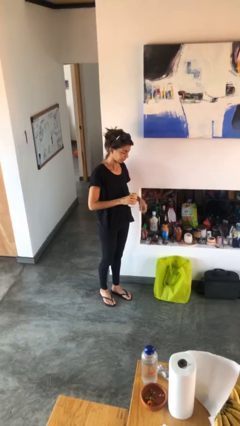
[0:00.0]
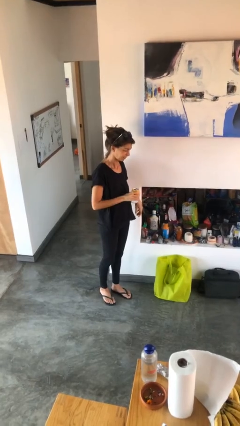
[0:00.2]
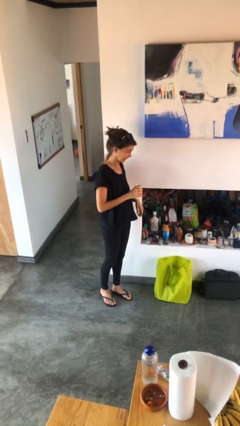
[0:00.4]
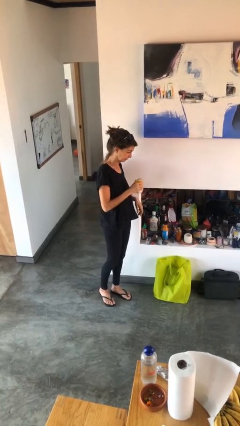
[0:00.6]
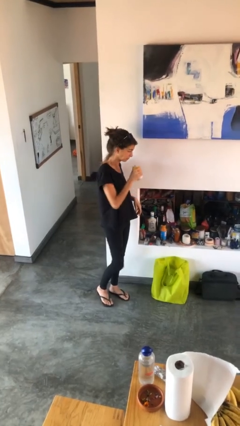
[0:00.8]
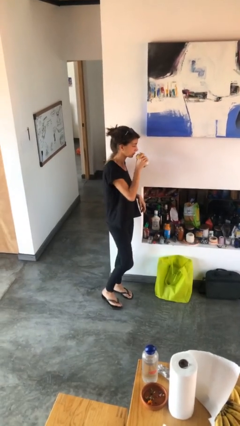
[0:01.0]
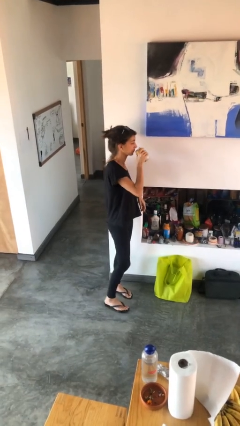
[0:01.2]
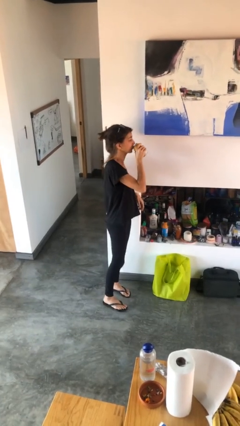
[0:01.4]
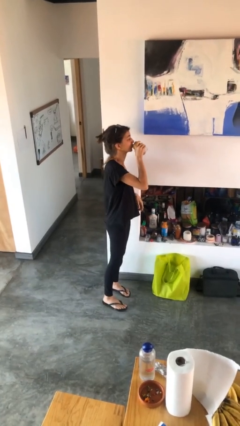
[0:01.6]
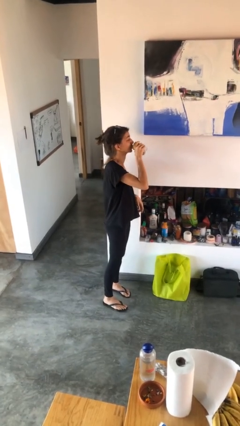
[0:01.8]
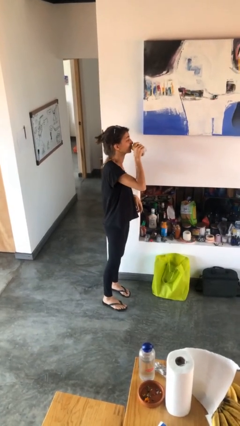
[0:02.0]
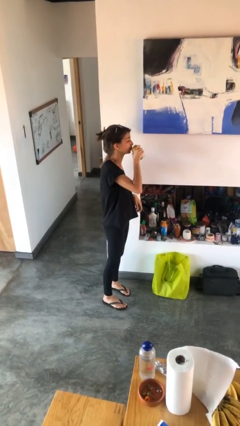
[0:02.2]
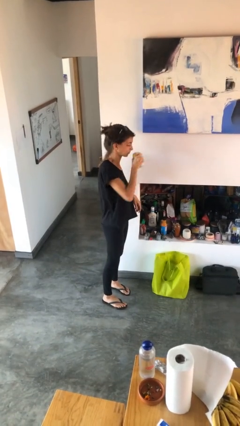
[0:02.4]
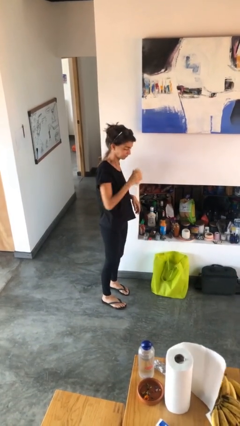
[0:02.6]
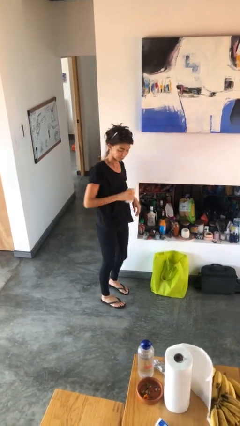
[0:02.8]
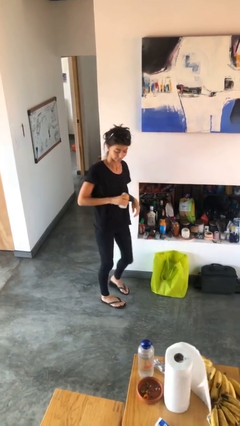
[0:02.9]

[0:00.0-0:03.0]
person drinks from beverage can

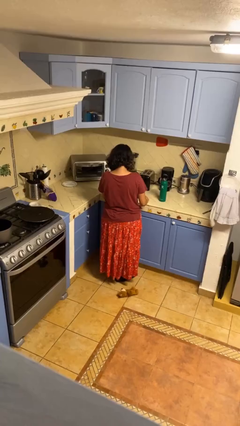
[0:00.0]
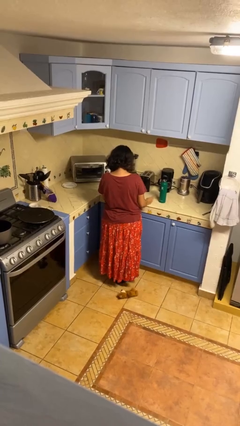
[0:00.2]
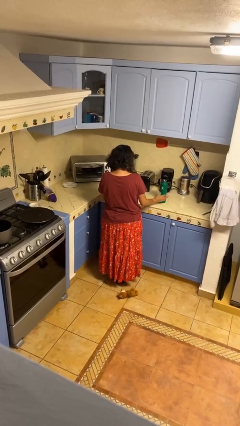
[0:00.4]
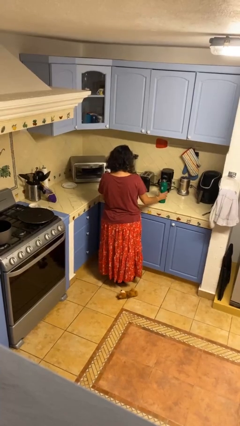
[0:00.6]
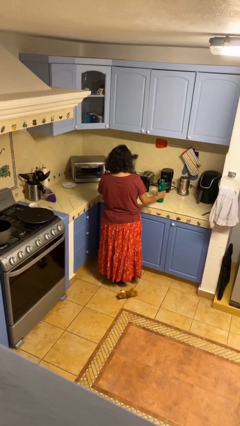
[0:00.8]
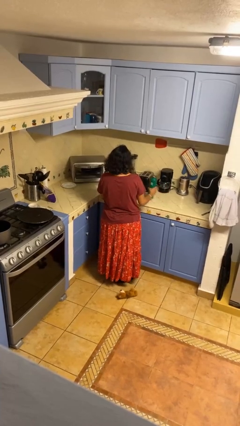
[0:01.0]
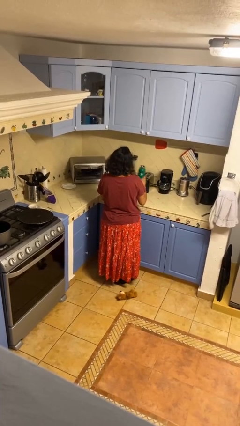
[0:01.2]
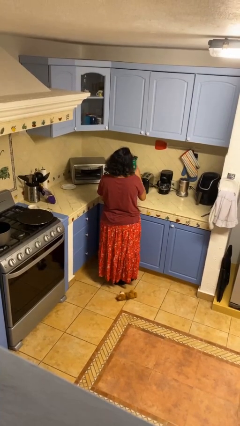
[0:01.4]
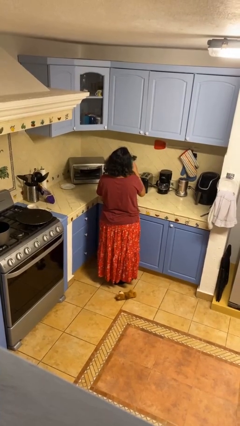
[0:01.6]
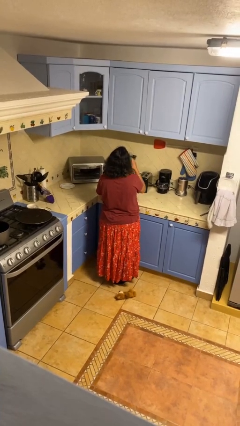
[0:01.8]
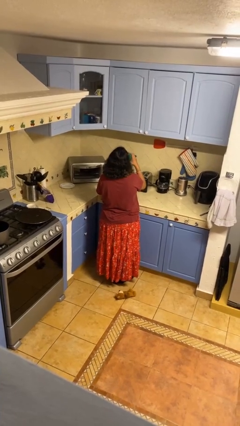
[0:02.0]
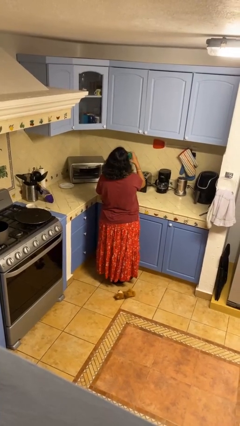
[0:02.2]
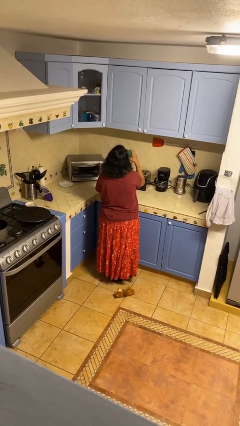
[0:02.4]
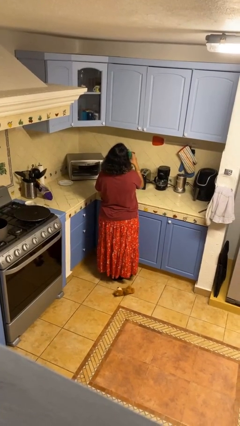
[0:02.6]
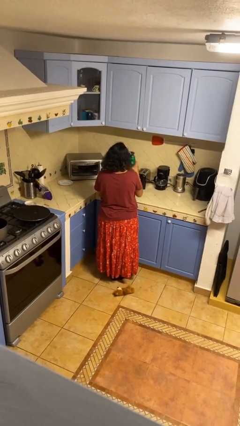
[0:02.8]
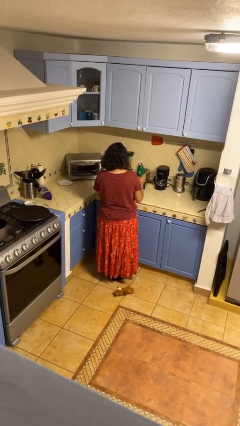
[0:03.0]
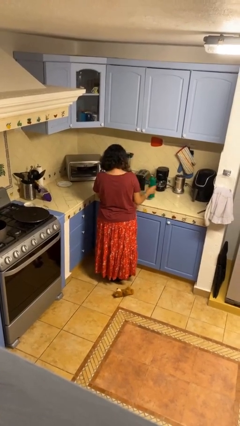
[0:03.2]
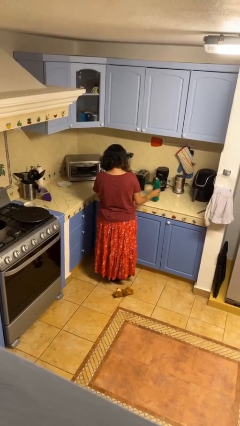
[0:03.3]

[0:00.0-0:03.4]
person drinks from bottle

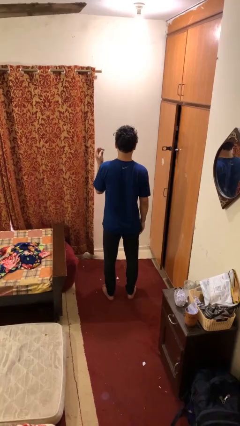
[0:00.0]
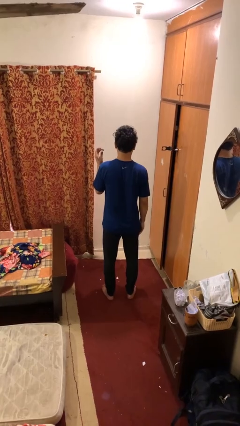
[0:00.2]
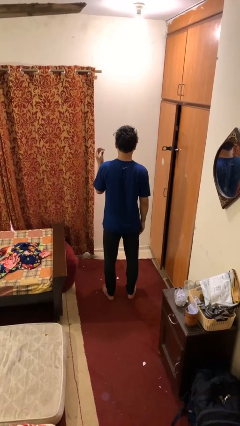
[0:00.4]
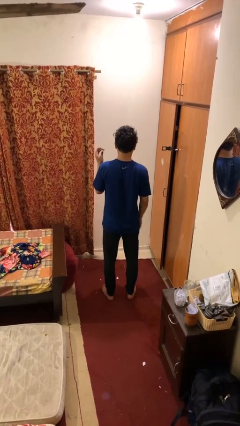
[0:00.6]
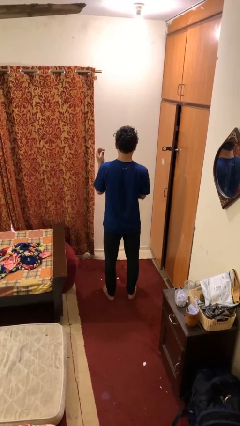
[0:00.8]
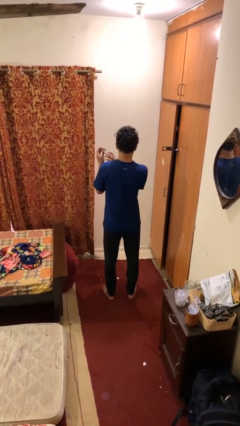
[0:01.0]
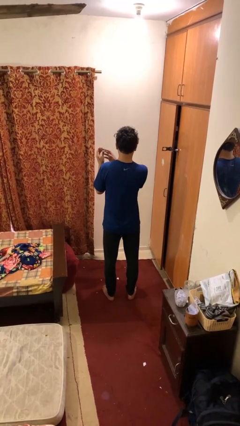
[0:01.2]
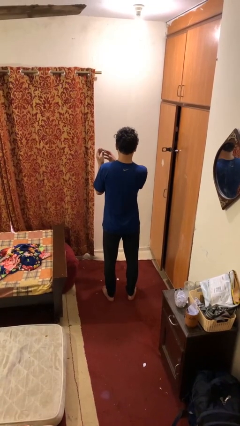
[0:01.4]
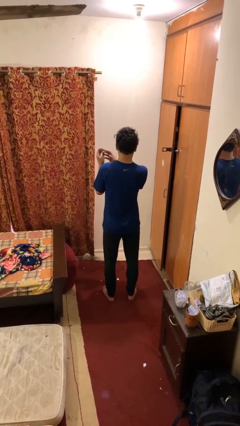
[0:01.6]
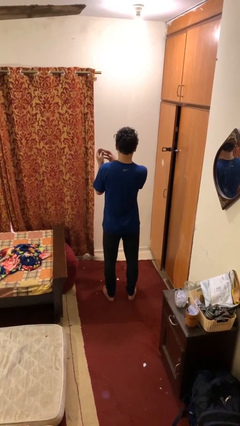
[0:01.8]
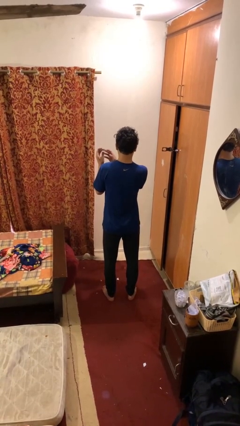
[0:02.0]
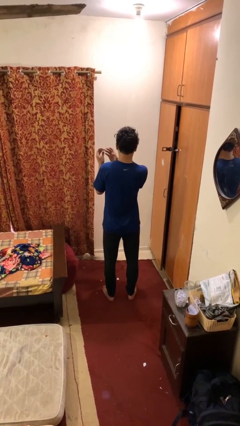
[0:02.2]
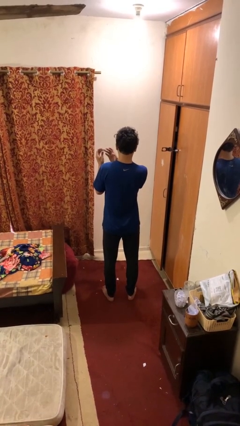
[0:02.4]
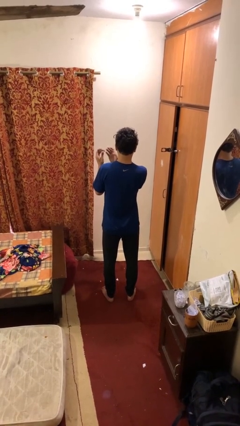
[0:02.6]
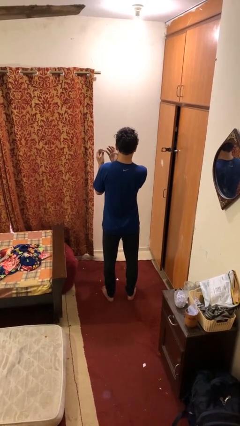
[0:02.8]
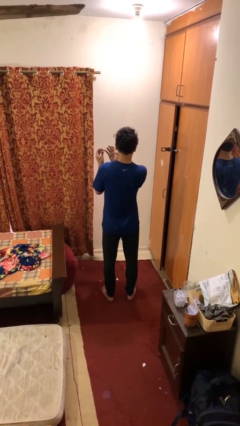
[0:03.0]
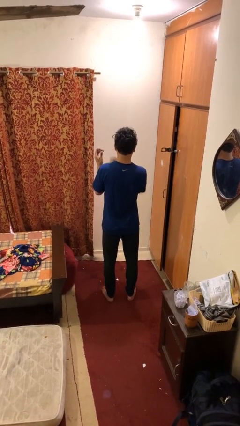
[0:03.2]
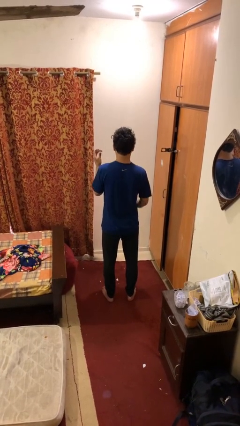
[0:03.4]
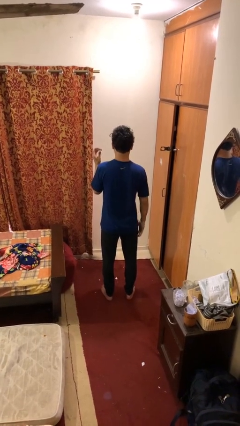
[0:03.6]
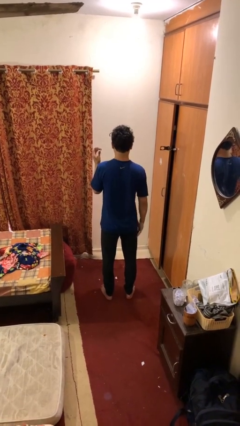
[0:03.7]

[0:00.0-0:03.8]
person clips fingernails

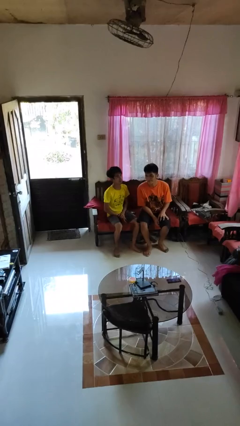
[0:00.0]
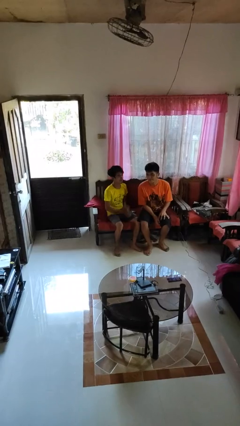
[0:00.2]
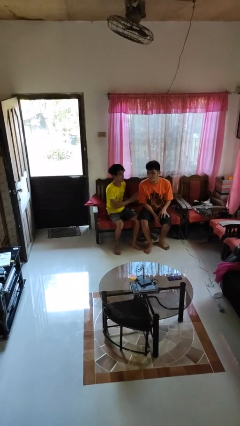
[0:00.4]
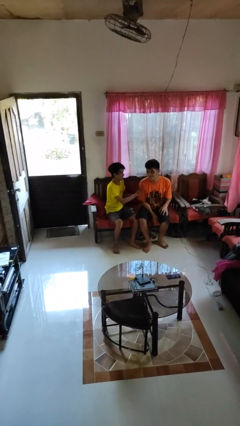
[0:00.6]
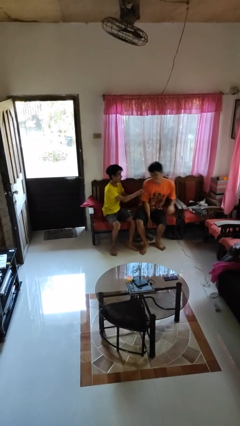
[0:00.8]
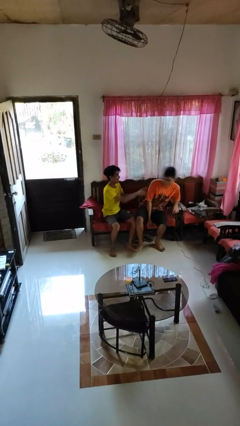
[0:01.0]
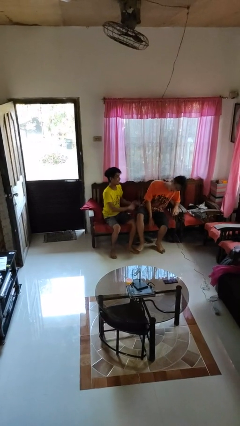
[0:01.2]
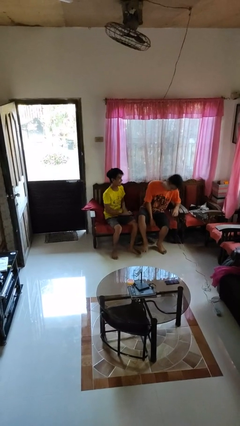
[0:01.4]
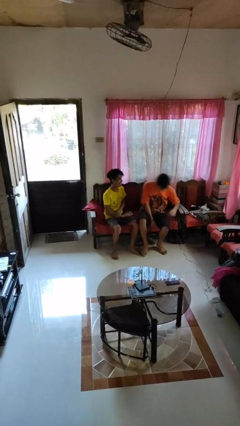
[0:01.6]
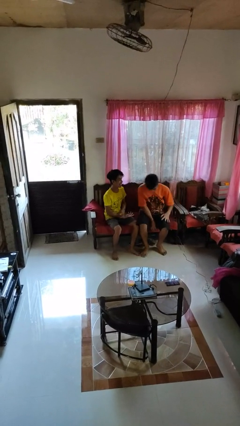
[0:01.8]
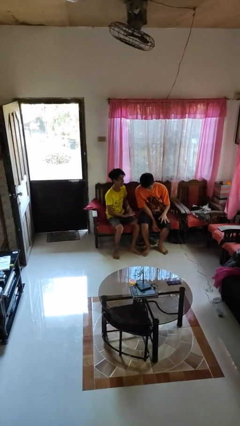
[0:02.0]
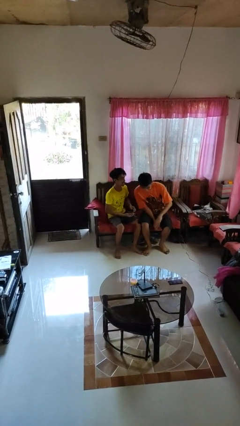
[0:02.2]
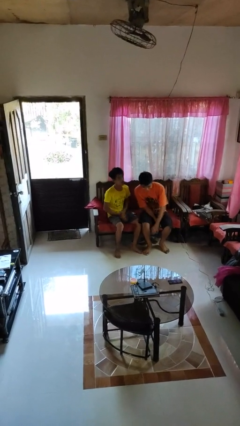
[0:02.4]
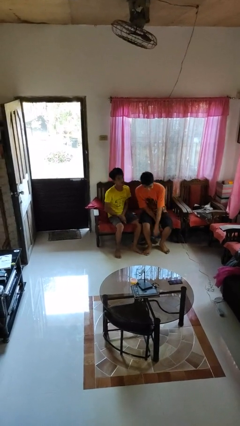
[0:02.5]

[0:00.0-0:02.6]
person shoves person

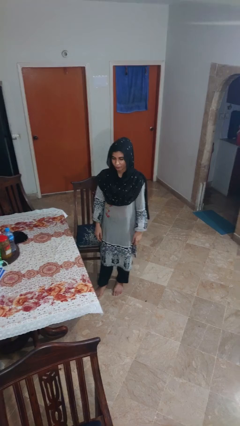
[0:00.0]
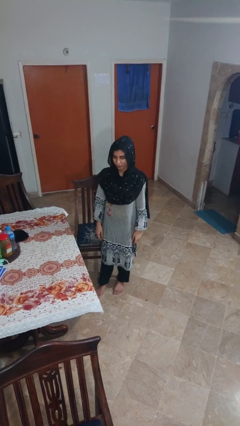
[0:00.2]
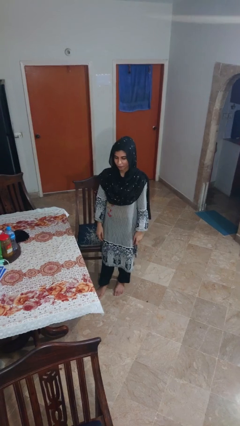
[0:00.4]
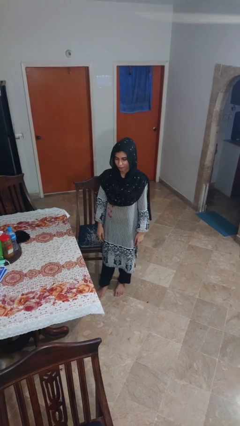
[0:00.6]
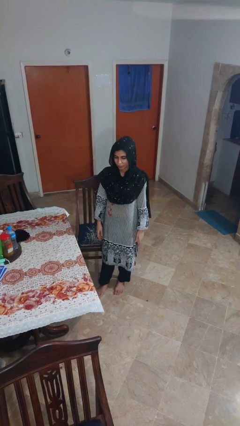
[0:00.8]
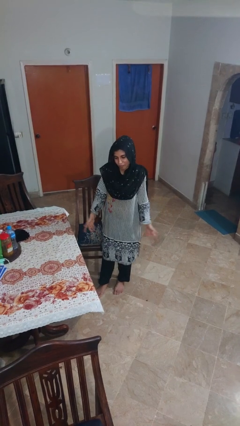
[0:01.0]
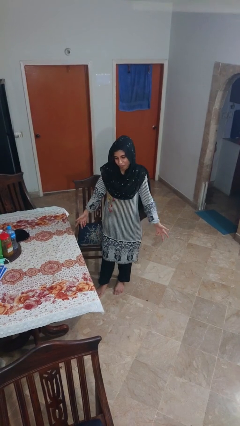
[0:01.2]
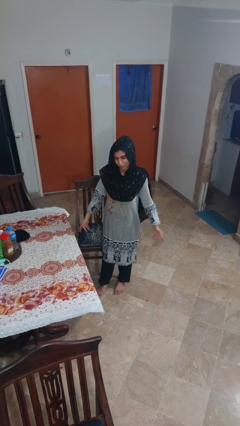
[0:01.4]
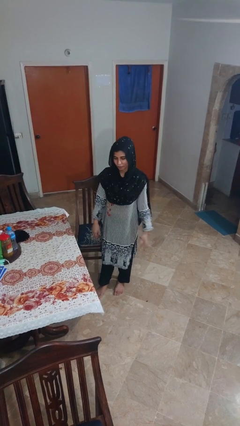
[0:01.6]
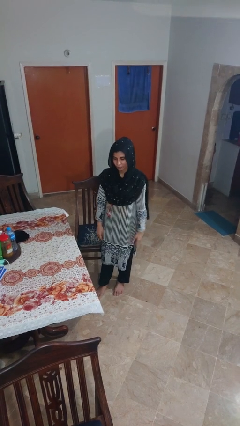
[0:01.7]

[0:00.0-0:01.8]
person shrugs

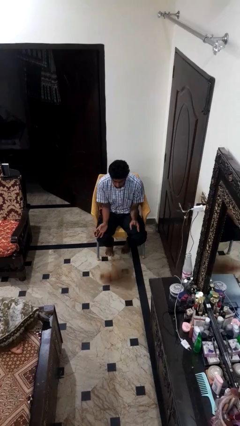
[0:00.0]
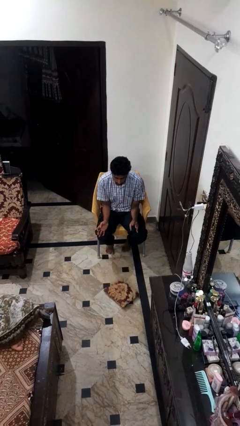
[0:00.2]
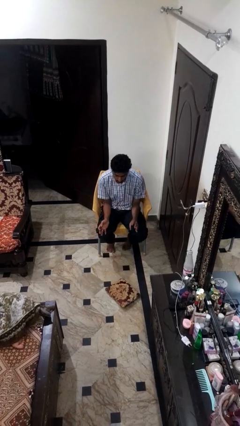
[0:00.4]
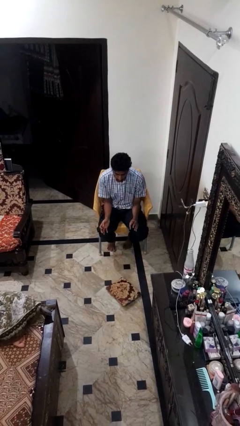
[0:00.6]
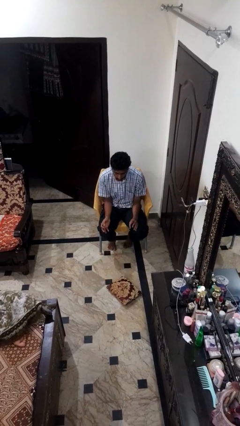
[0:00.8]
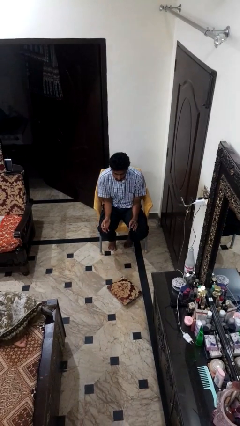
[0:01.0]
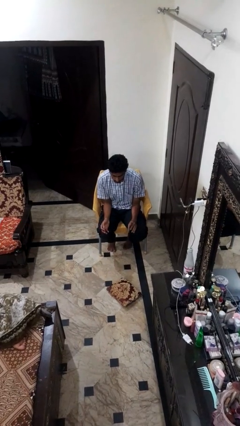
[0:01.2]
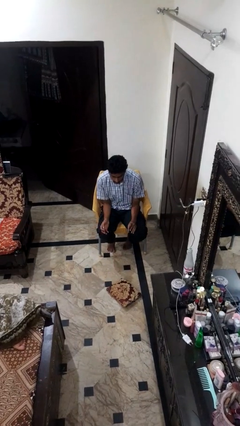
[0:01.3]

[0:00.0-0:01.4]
person drops object

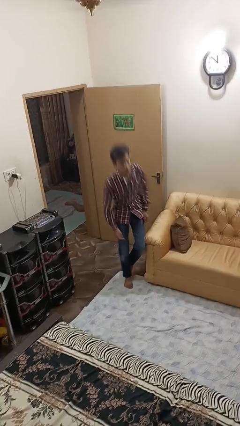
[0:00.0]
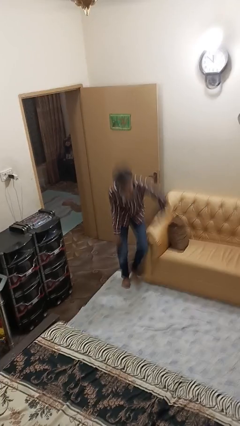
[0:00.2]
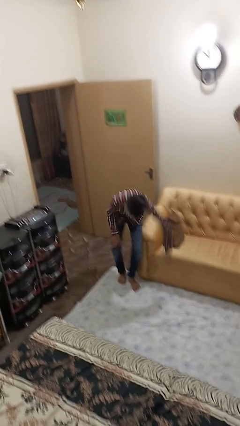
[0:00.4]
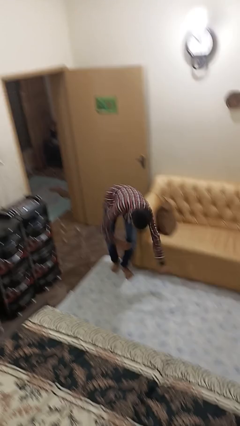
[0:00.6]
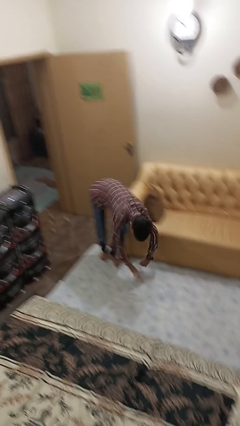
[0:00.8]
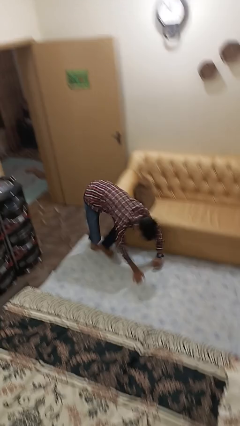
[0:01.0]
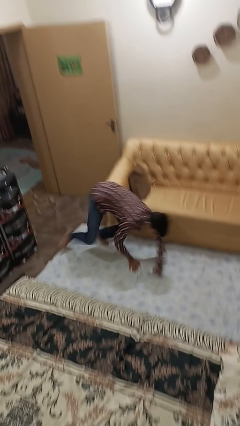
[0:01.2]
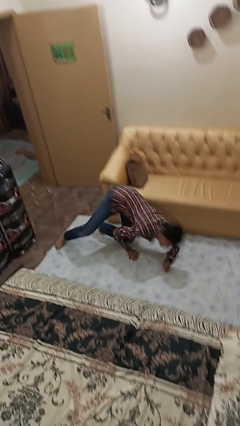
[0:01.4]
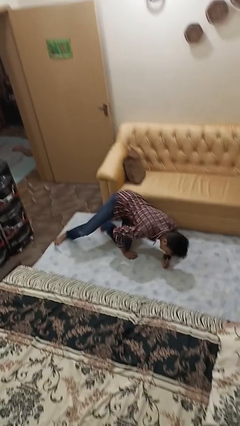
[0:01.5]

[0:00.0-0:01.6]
person trips on object on floor
